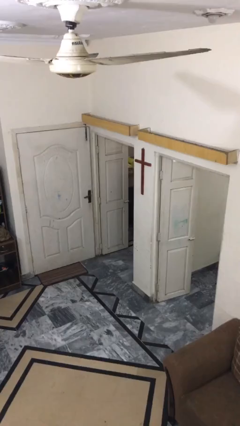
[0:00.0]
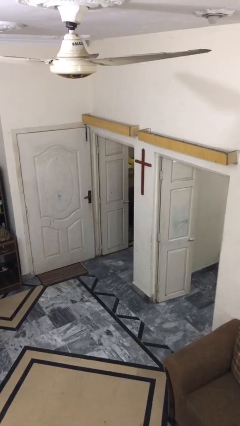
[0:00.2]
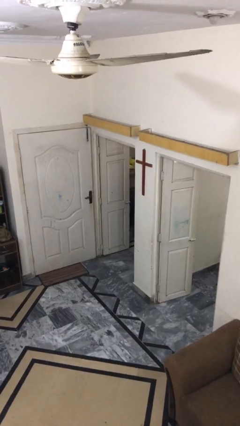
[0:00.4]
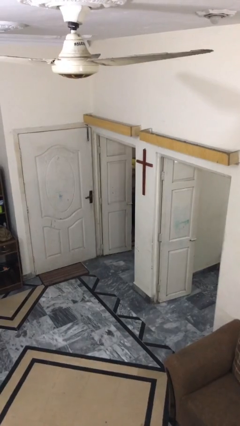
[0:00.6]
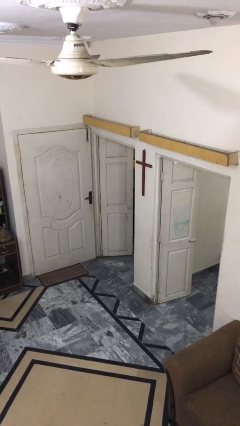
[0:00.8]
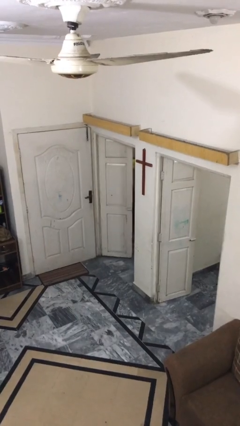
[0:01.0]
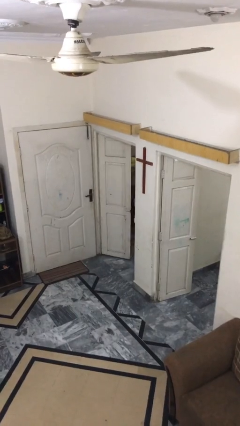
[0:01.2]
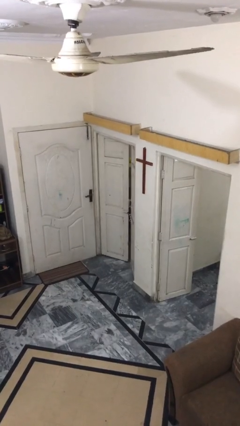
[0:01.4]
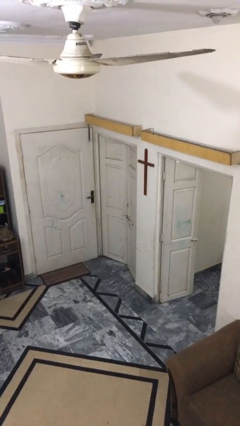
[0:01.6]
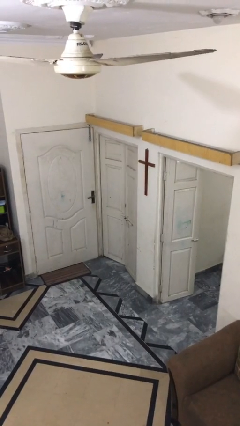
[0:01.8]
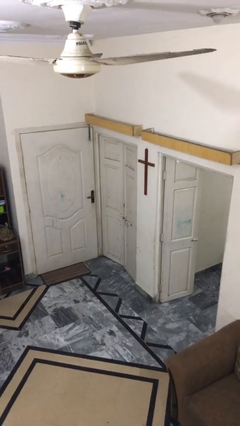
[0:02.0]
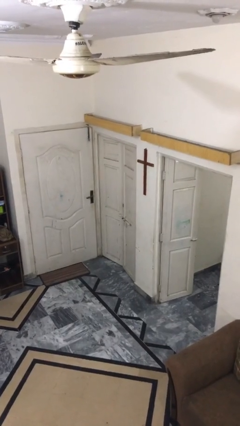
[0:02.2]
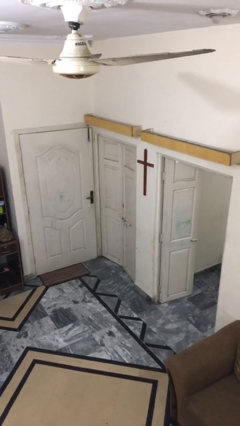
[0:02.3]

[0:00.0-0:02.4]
person closes facility door

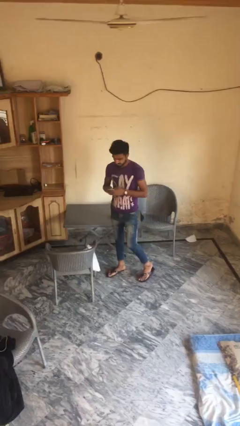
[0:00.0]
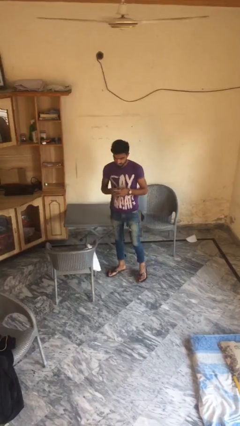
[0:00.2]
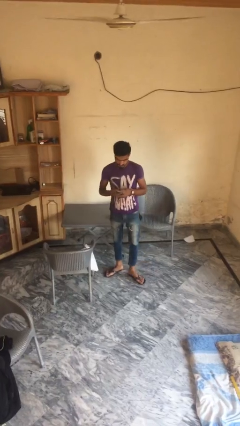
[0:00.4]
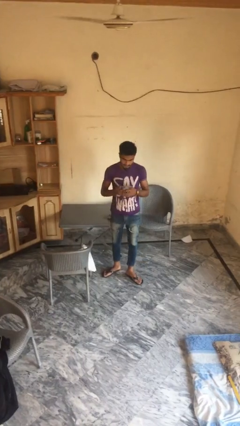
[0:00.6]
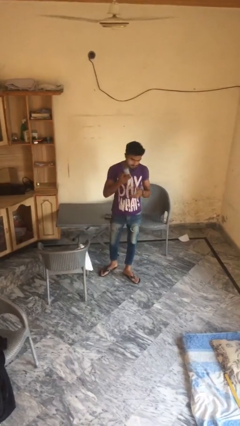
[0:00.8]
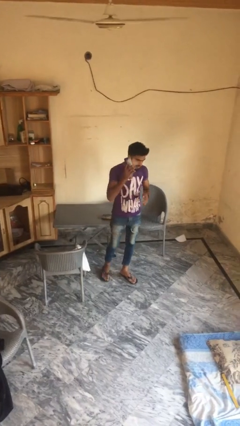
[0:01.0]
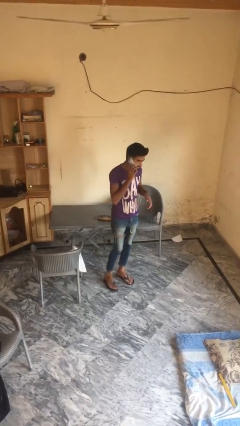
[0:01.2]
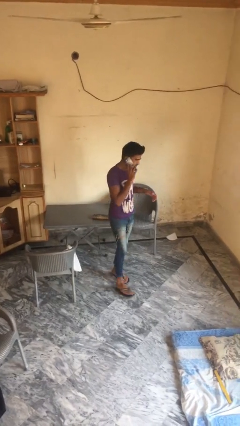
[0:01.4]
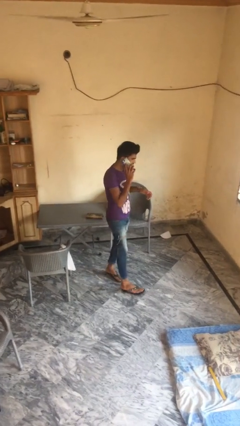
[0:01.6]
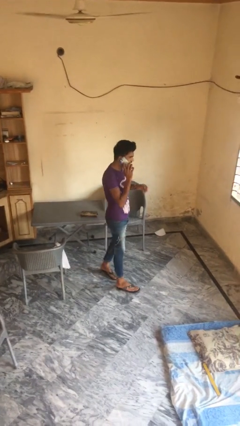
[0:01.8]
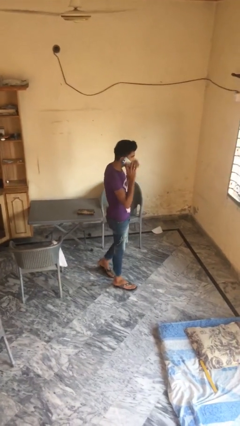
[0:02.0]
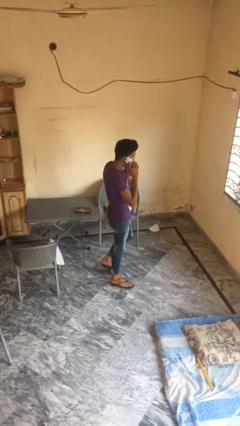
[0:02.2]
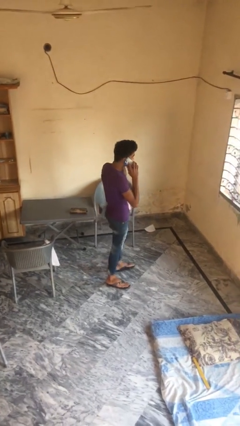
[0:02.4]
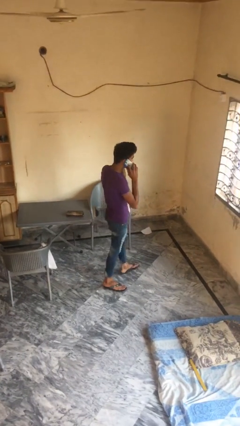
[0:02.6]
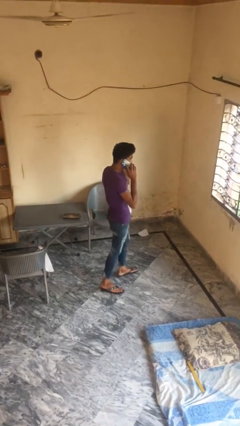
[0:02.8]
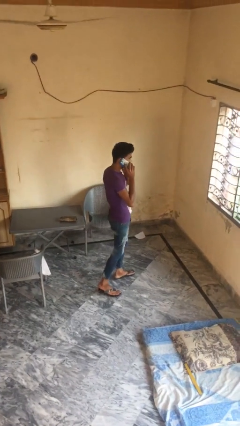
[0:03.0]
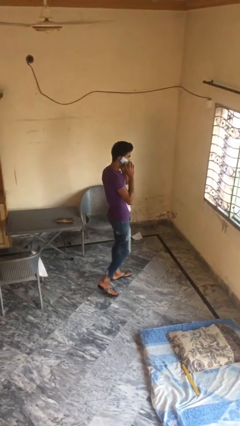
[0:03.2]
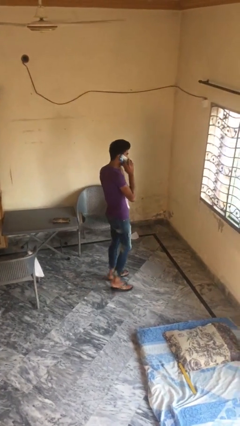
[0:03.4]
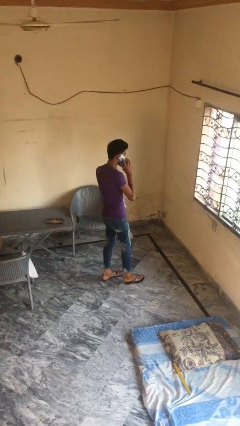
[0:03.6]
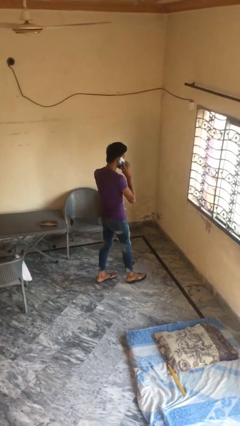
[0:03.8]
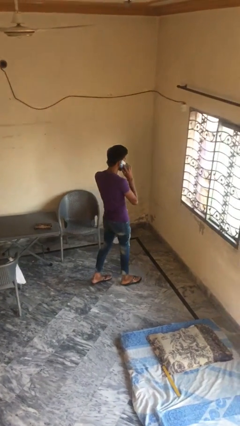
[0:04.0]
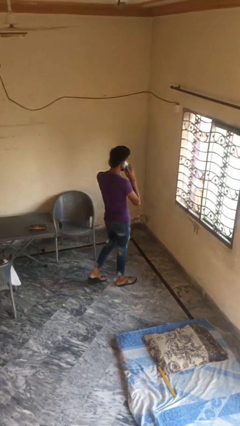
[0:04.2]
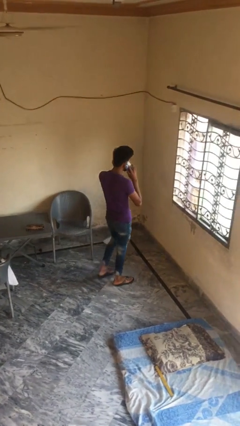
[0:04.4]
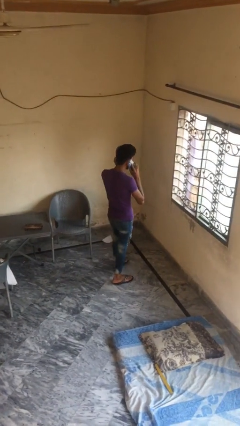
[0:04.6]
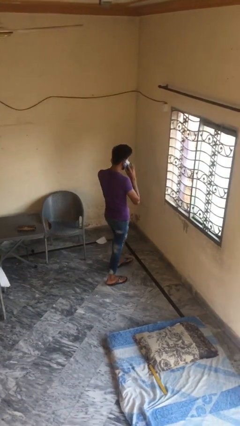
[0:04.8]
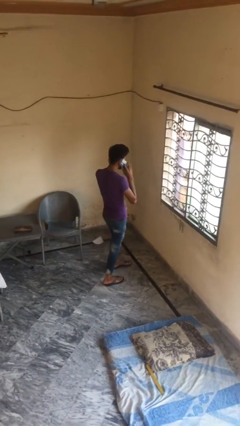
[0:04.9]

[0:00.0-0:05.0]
person talks on phone

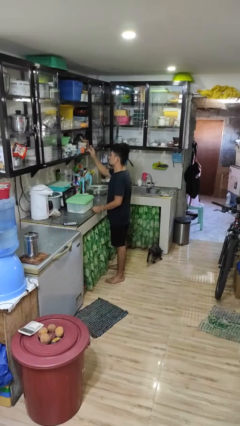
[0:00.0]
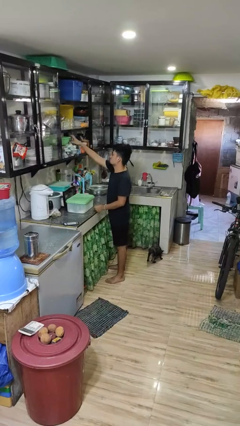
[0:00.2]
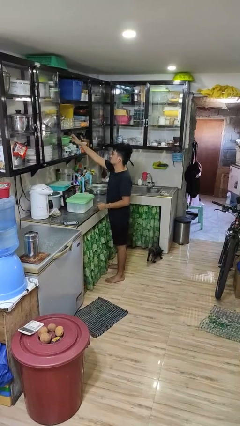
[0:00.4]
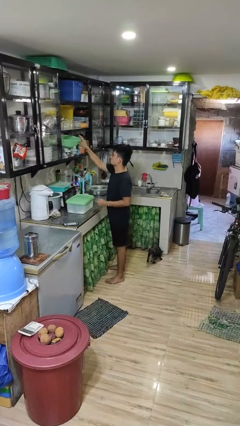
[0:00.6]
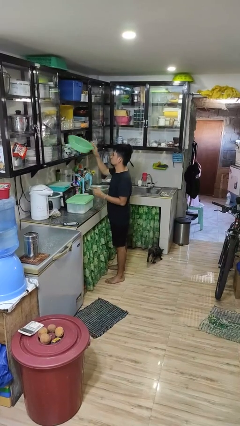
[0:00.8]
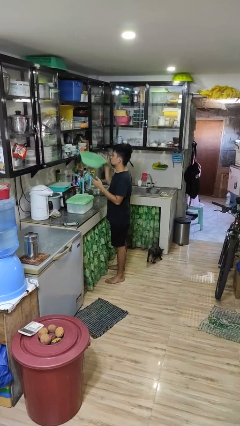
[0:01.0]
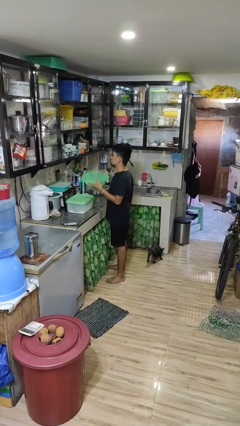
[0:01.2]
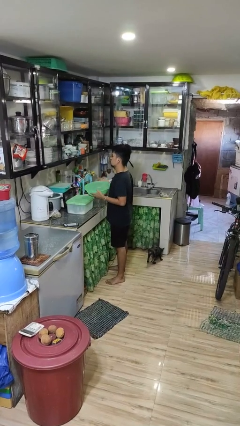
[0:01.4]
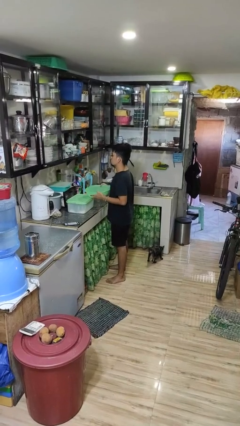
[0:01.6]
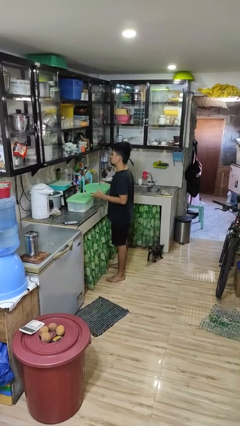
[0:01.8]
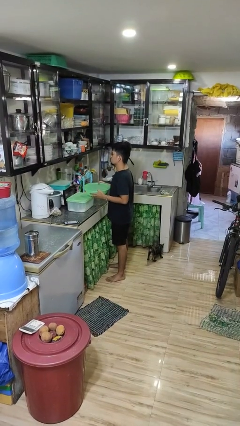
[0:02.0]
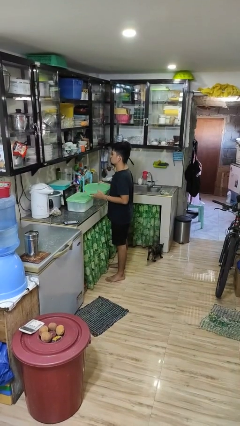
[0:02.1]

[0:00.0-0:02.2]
person picks up object from cabinet

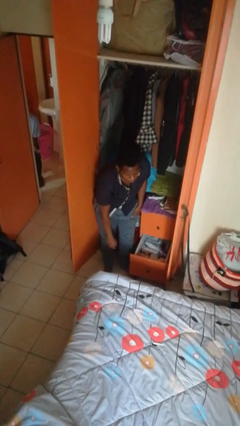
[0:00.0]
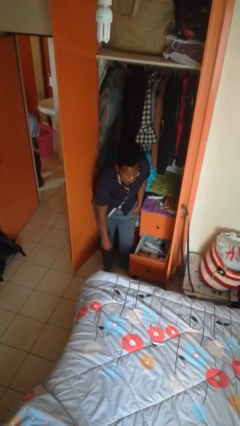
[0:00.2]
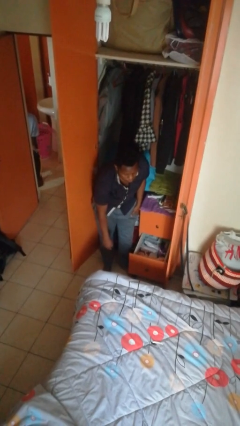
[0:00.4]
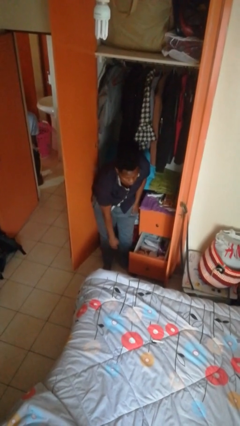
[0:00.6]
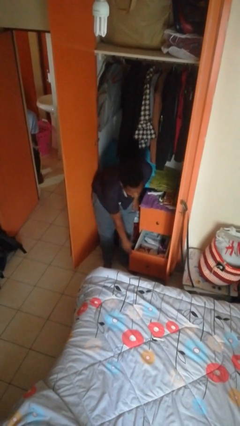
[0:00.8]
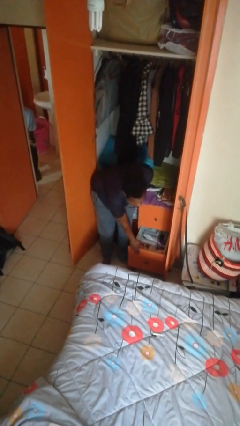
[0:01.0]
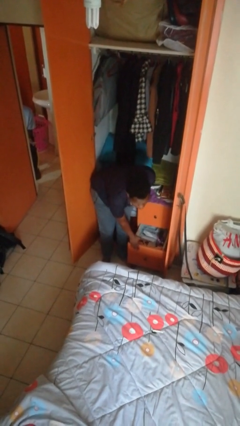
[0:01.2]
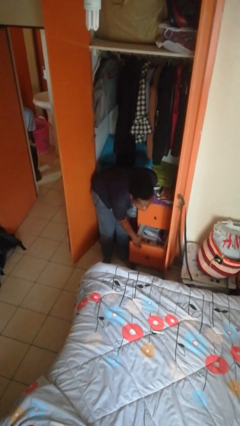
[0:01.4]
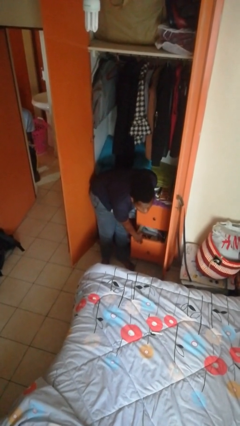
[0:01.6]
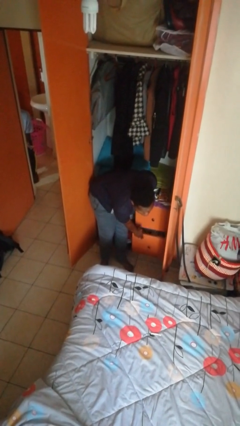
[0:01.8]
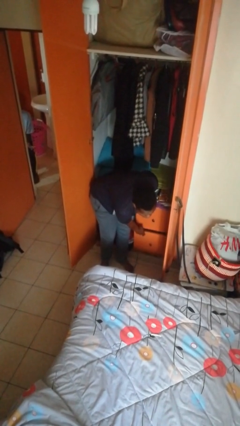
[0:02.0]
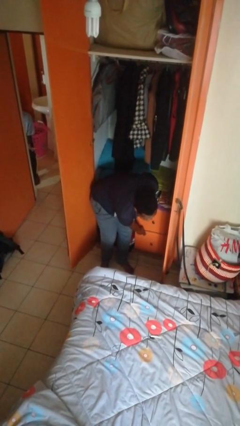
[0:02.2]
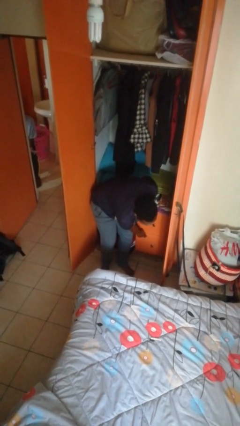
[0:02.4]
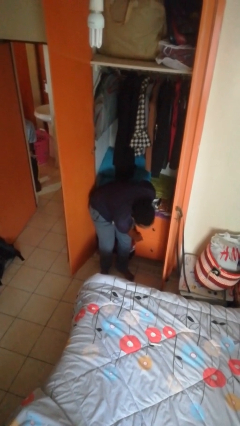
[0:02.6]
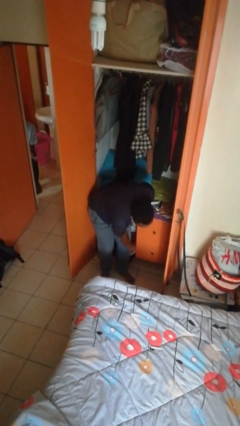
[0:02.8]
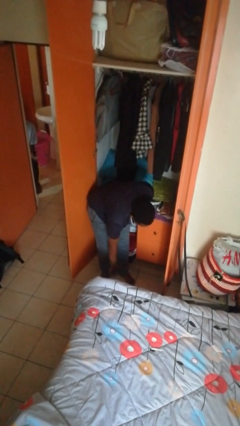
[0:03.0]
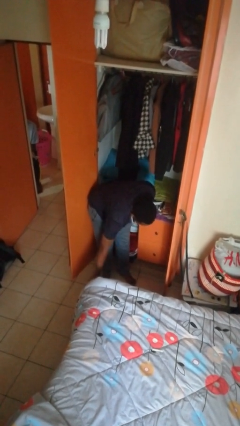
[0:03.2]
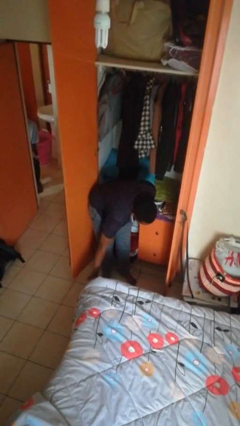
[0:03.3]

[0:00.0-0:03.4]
person closes dresser drawer

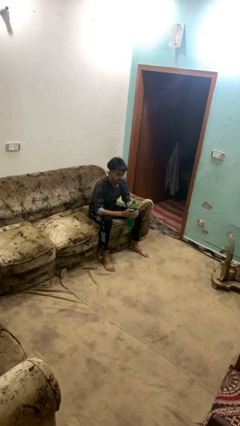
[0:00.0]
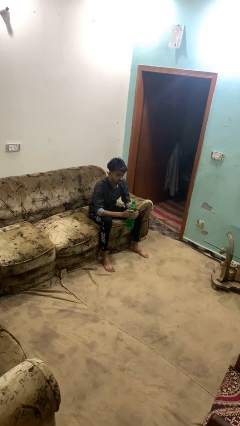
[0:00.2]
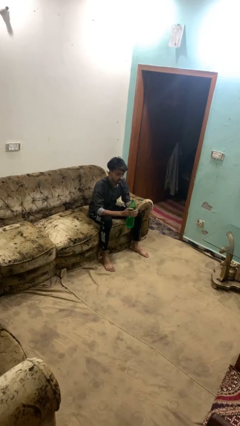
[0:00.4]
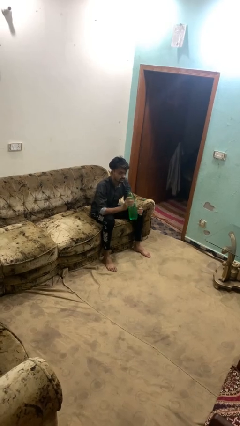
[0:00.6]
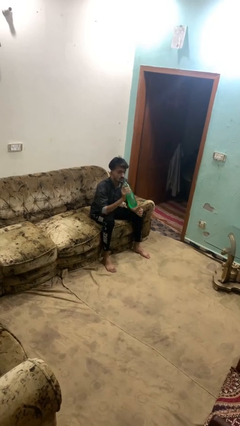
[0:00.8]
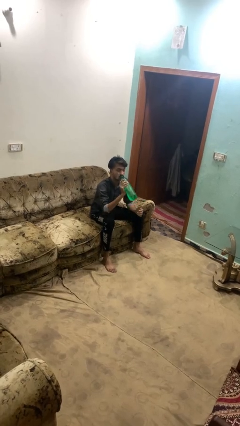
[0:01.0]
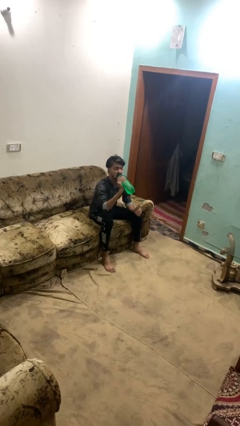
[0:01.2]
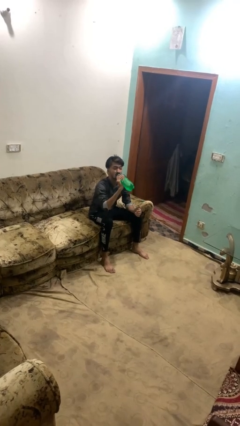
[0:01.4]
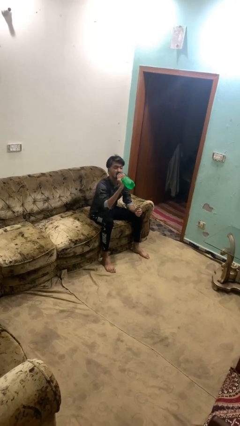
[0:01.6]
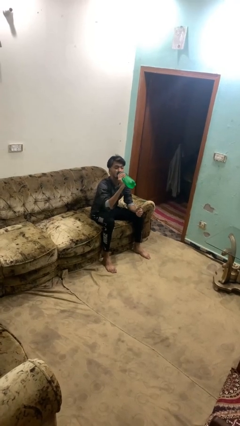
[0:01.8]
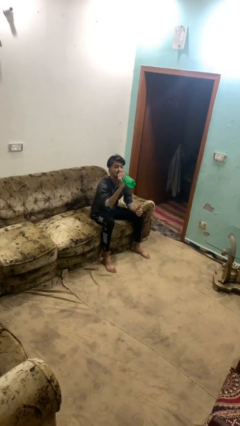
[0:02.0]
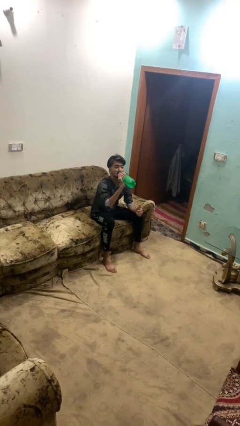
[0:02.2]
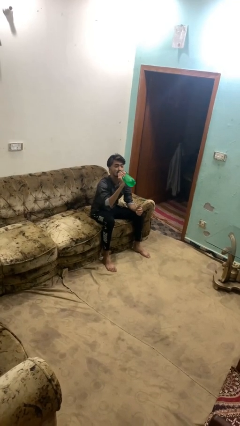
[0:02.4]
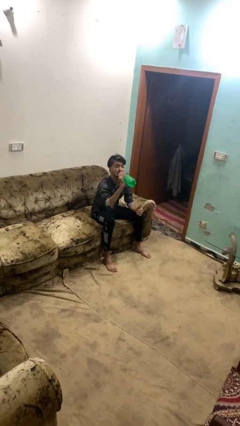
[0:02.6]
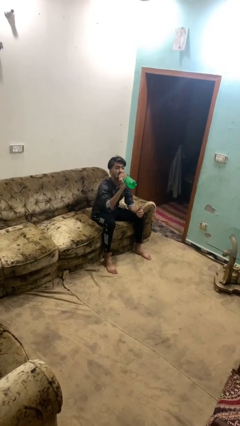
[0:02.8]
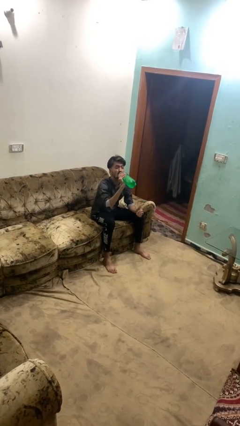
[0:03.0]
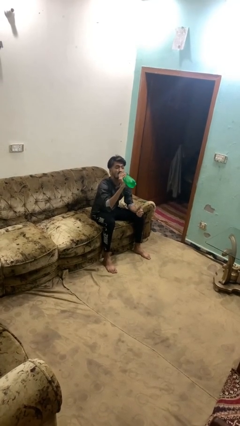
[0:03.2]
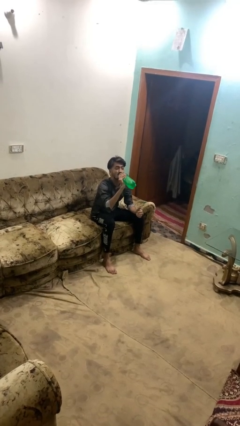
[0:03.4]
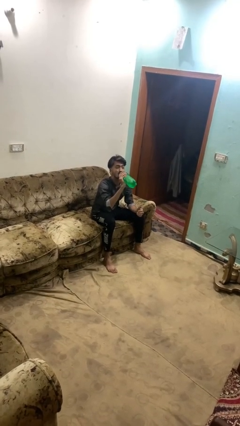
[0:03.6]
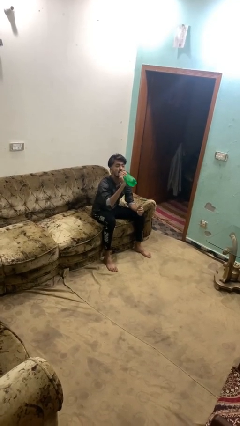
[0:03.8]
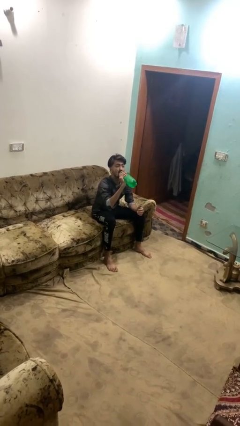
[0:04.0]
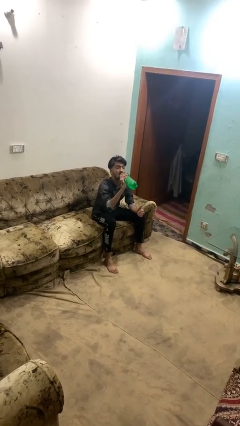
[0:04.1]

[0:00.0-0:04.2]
person drinks from bottle

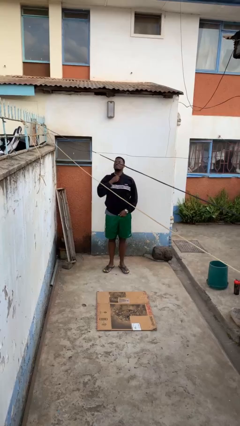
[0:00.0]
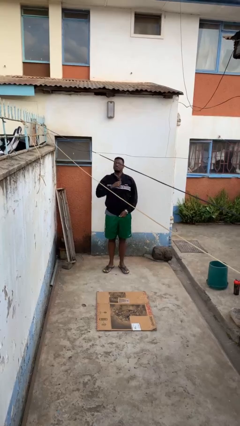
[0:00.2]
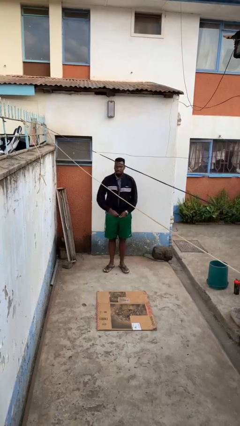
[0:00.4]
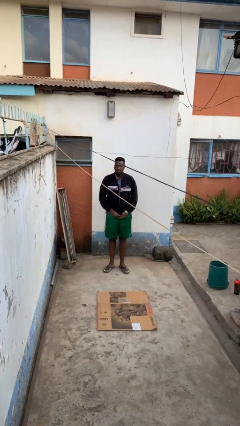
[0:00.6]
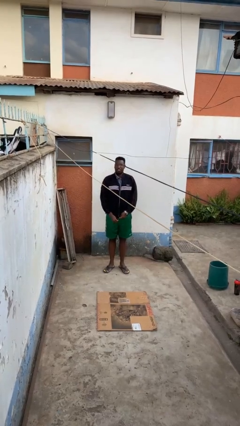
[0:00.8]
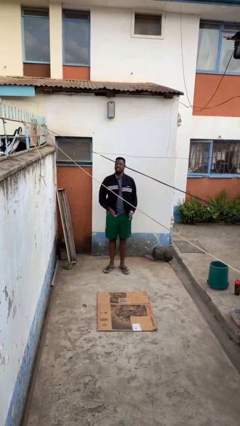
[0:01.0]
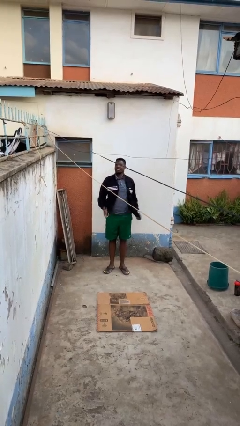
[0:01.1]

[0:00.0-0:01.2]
person unzips jacket
